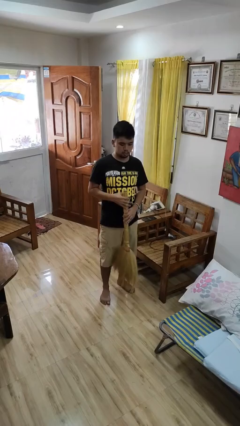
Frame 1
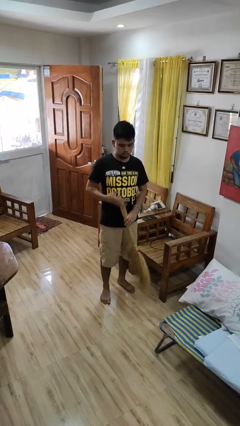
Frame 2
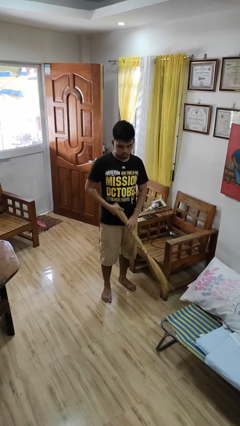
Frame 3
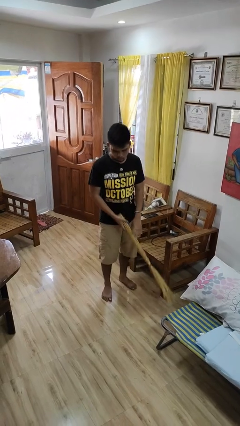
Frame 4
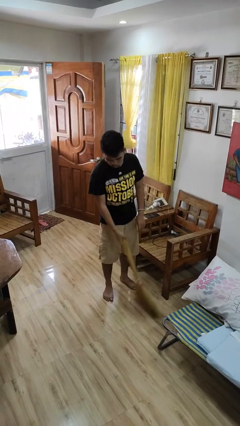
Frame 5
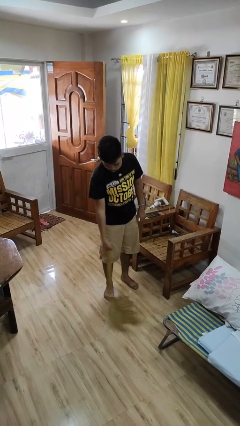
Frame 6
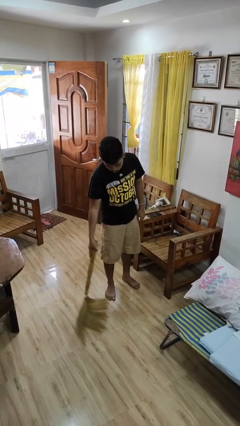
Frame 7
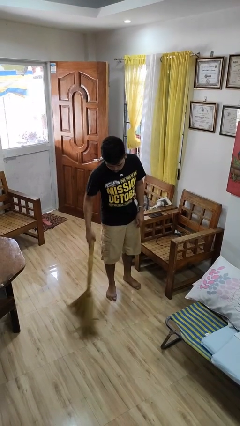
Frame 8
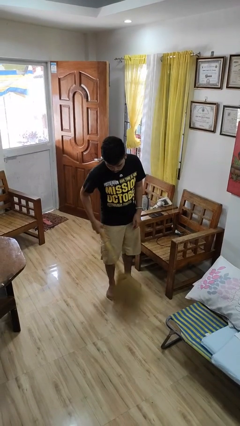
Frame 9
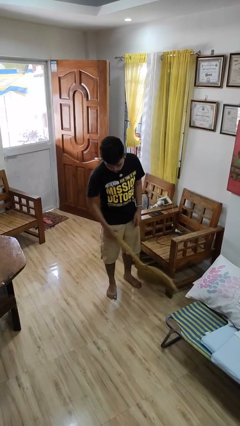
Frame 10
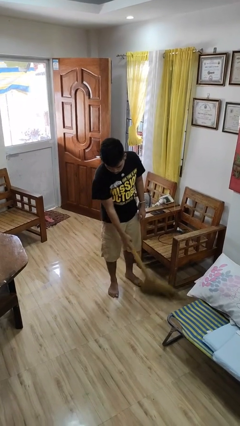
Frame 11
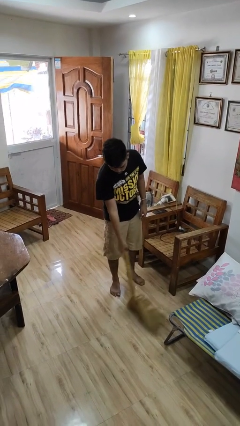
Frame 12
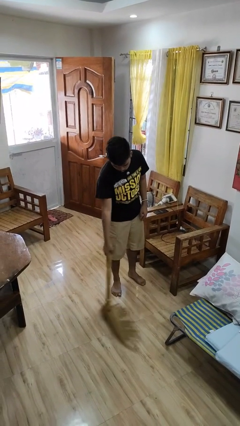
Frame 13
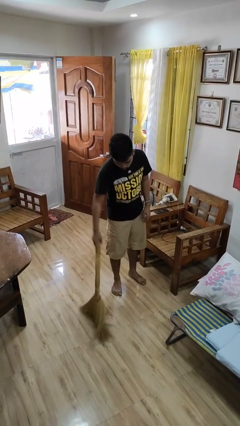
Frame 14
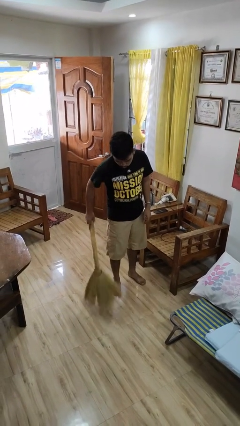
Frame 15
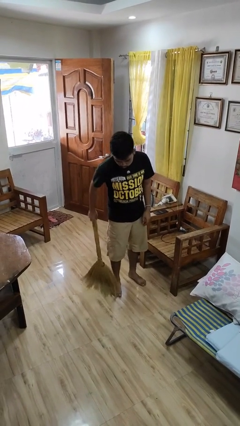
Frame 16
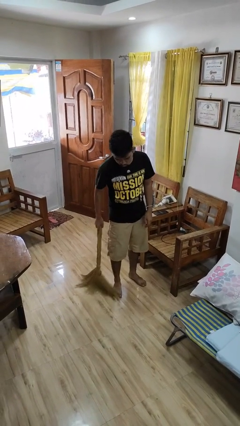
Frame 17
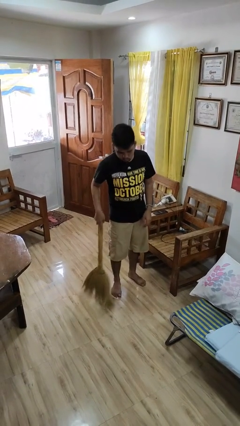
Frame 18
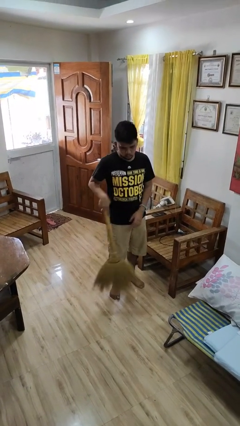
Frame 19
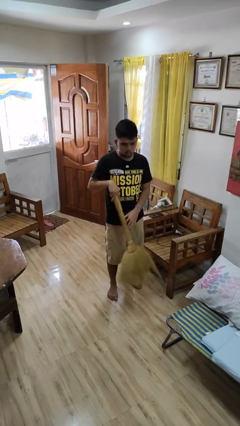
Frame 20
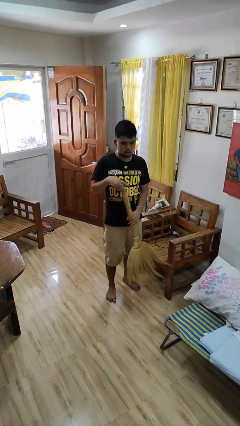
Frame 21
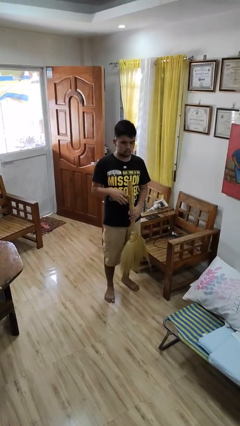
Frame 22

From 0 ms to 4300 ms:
person sweeps floor

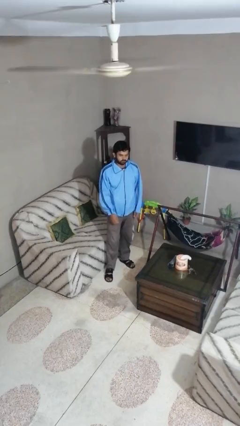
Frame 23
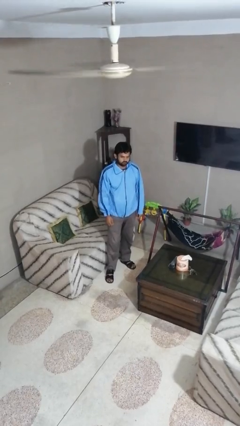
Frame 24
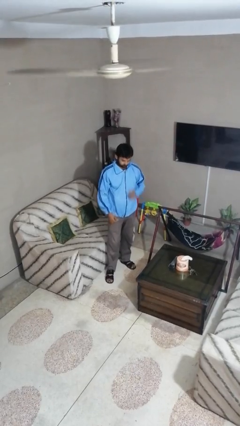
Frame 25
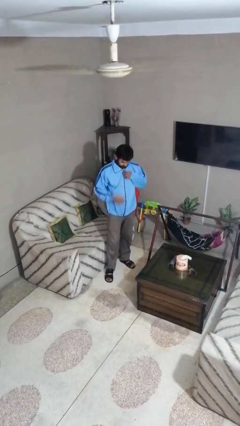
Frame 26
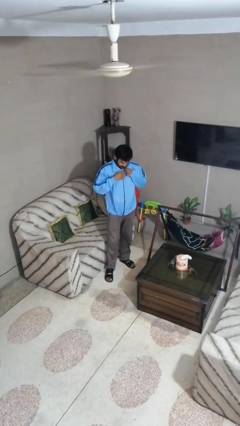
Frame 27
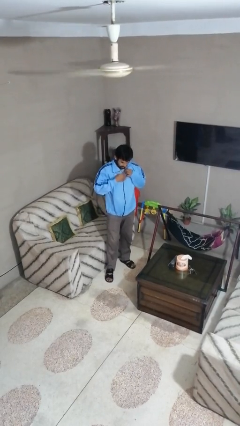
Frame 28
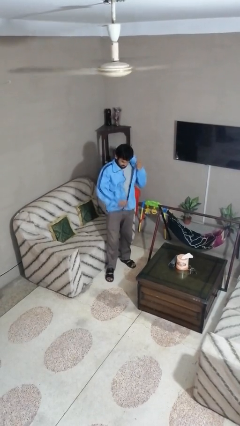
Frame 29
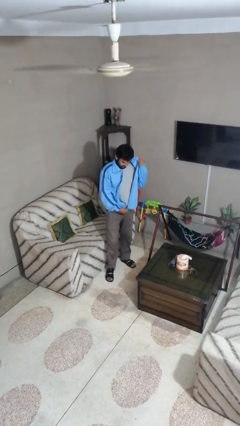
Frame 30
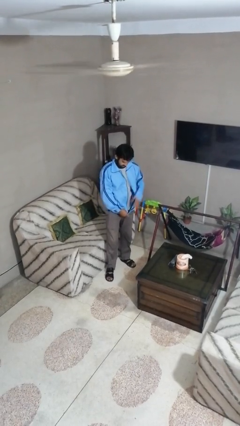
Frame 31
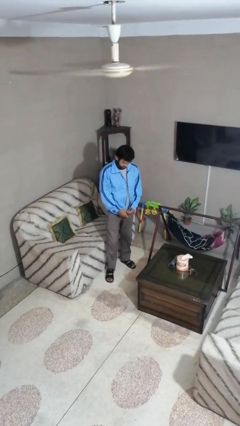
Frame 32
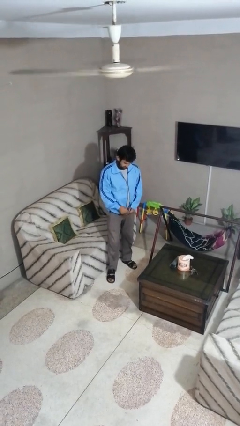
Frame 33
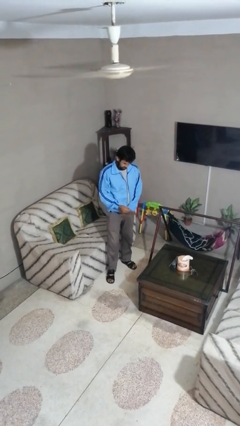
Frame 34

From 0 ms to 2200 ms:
person unzips jacket

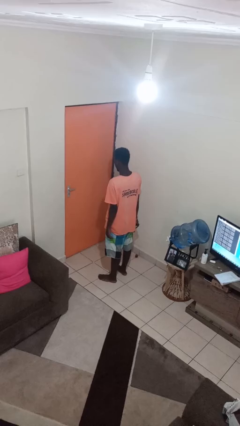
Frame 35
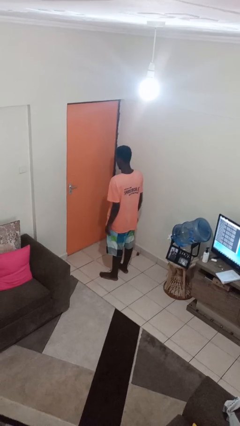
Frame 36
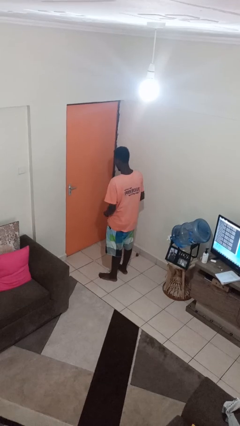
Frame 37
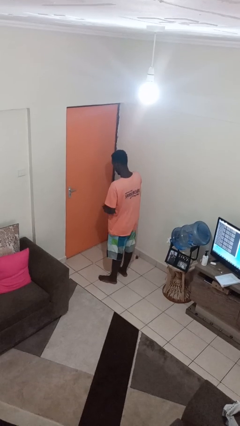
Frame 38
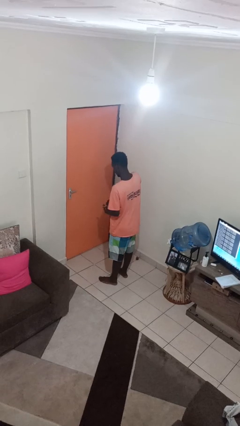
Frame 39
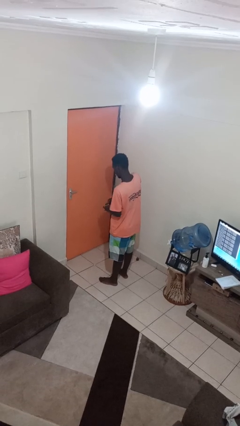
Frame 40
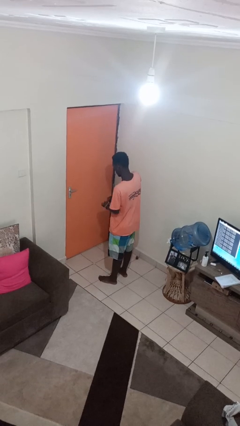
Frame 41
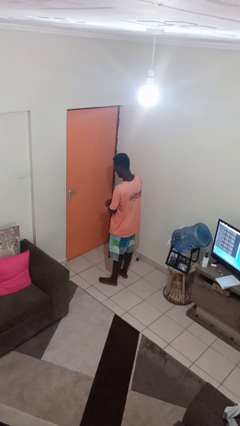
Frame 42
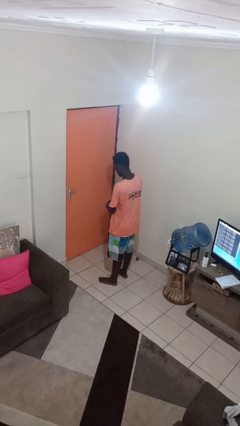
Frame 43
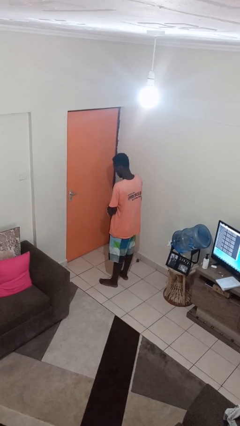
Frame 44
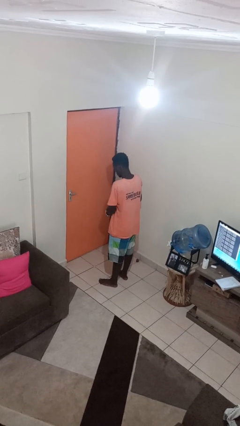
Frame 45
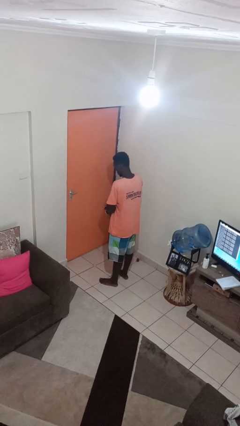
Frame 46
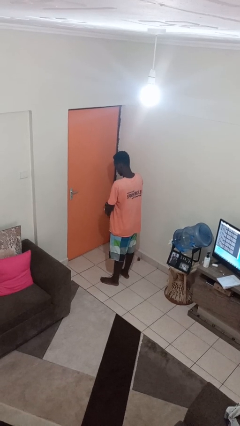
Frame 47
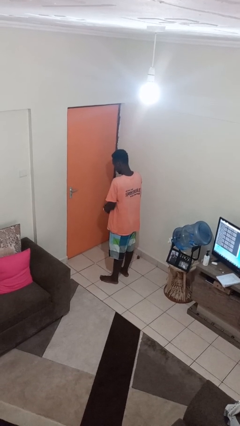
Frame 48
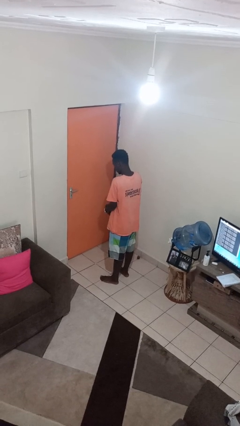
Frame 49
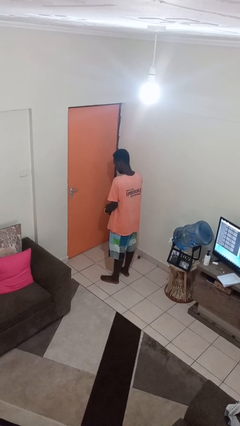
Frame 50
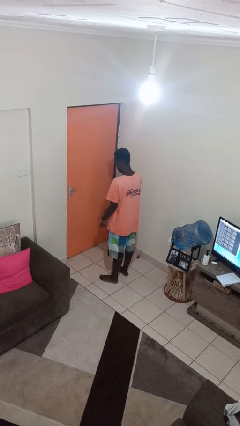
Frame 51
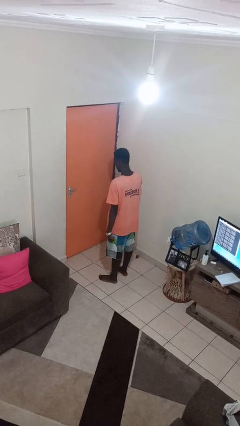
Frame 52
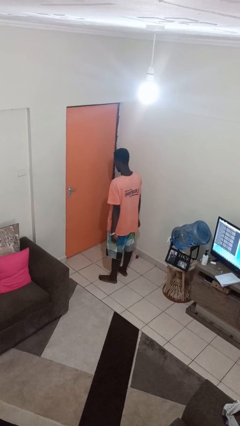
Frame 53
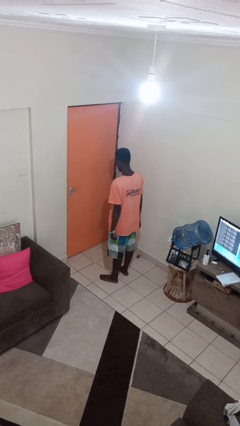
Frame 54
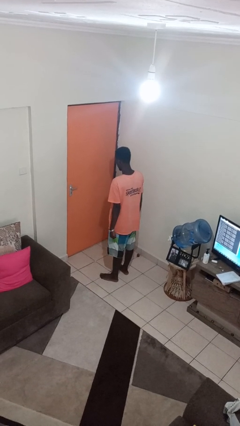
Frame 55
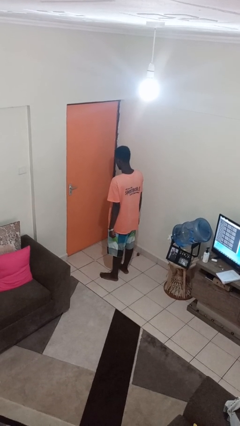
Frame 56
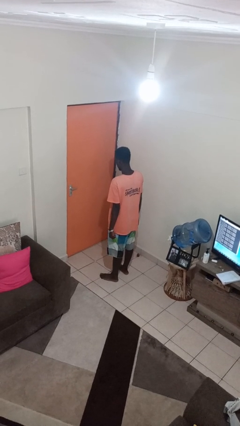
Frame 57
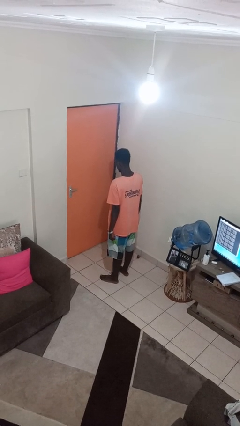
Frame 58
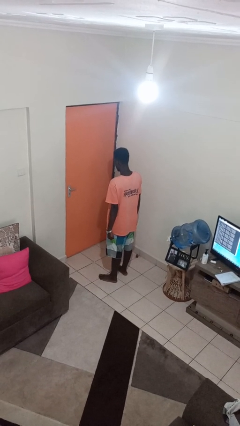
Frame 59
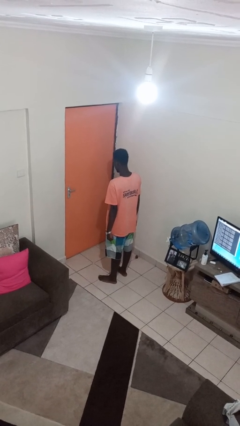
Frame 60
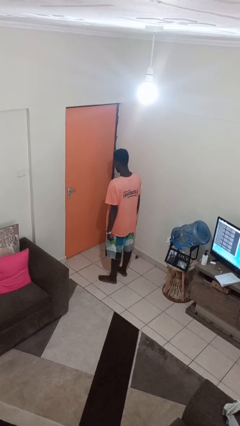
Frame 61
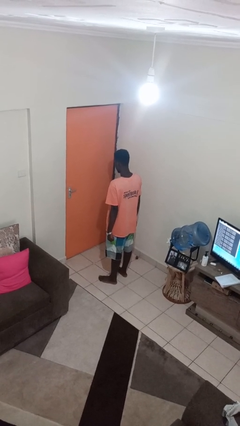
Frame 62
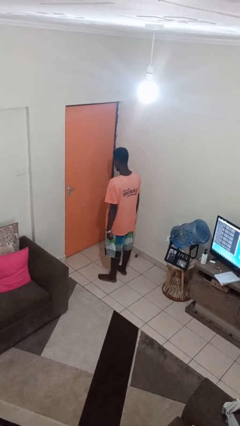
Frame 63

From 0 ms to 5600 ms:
person puts on wristwatch

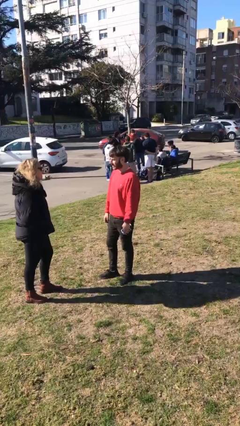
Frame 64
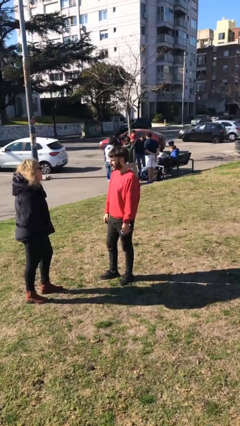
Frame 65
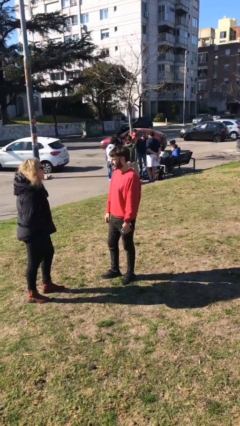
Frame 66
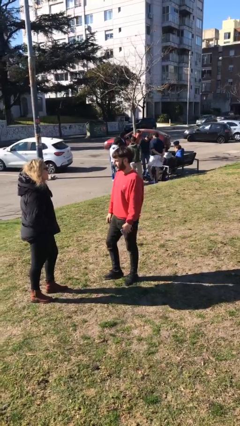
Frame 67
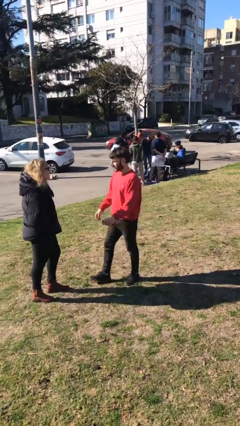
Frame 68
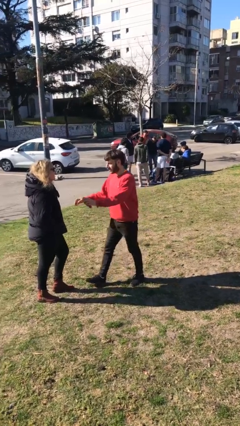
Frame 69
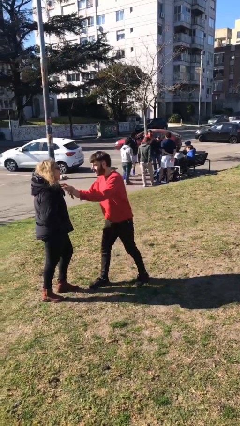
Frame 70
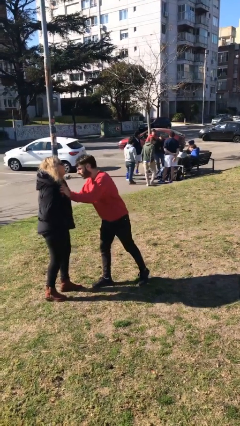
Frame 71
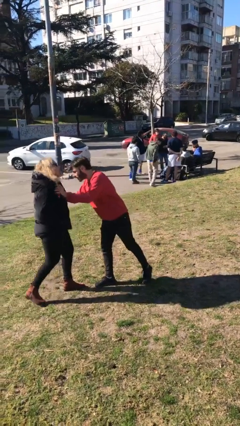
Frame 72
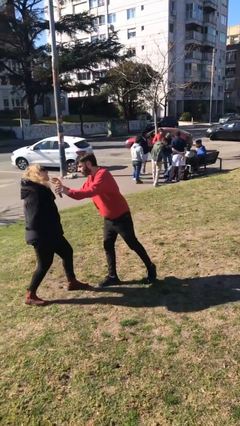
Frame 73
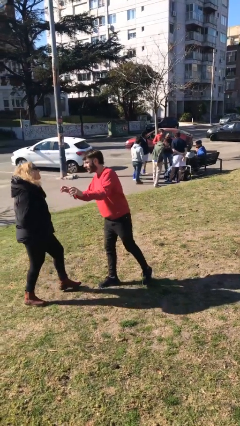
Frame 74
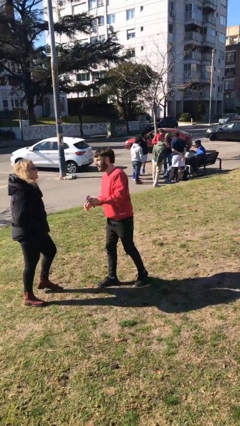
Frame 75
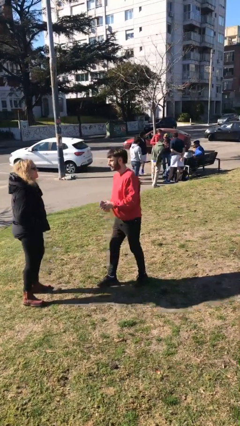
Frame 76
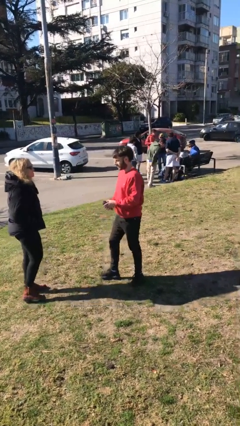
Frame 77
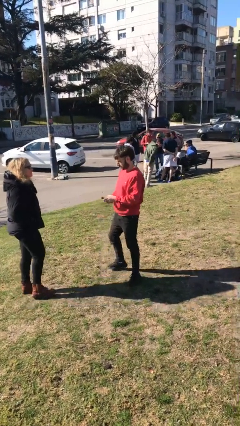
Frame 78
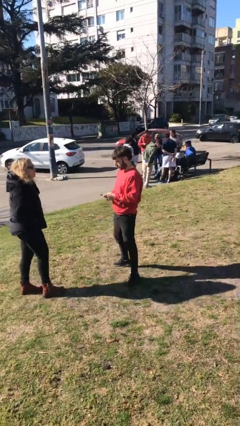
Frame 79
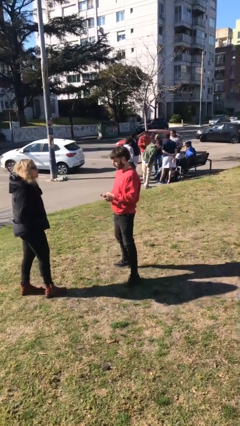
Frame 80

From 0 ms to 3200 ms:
person shoves person

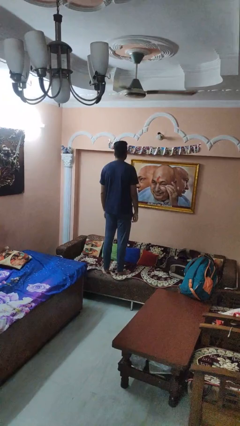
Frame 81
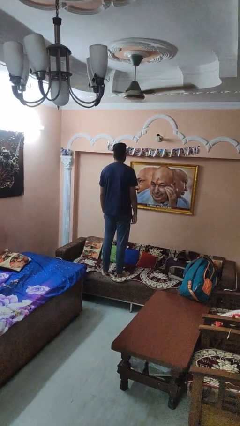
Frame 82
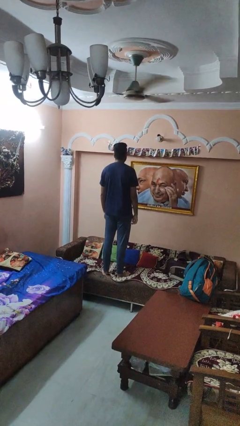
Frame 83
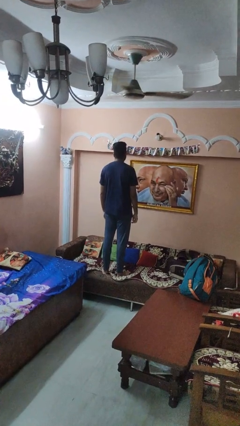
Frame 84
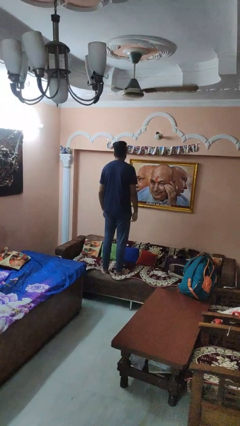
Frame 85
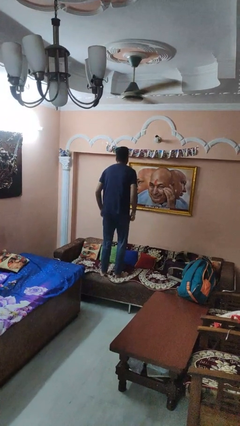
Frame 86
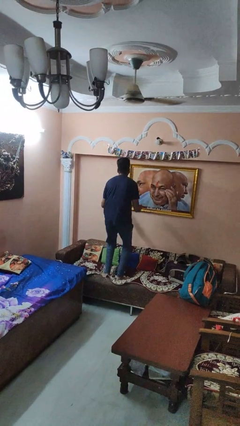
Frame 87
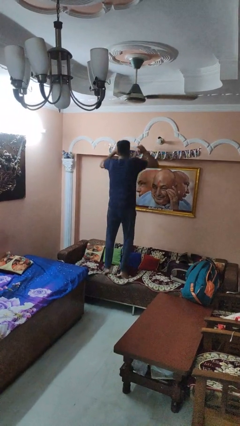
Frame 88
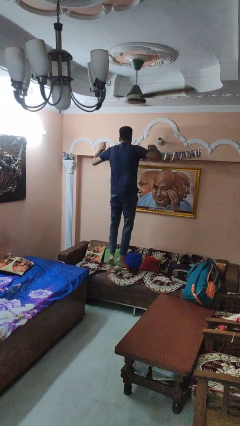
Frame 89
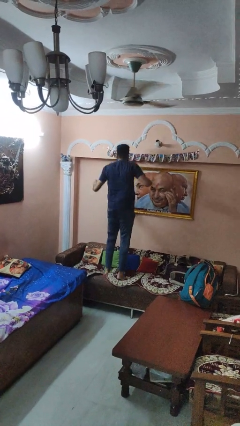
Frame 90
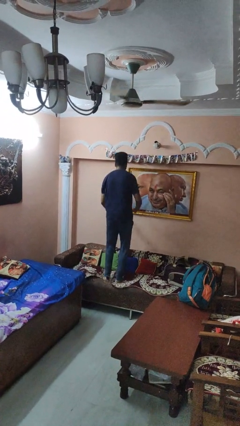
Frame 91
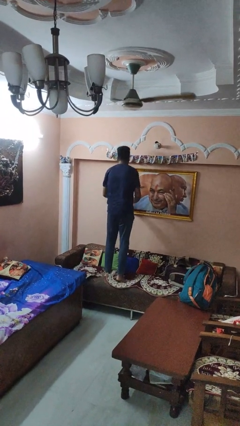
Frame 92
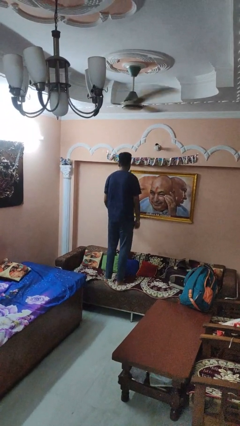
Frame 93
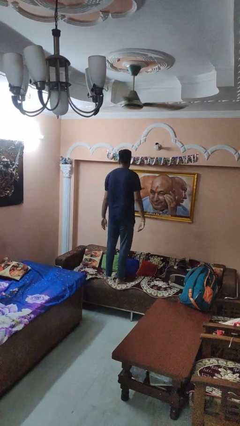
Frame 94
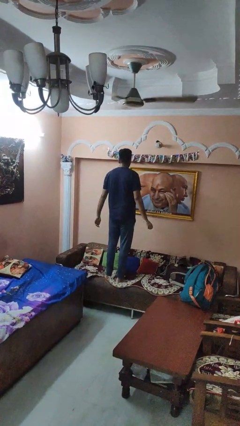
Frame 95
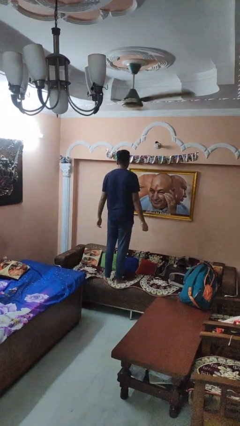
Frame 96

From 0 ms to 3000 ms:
person jumps on couch
